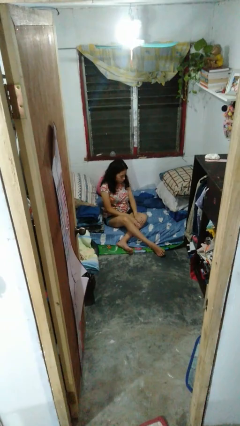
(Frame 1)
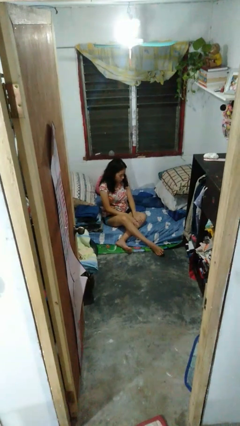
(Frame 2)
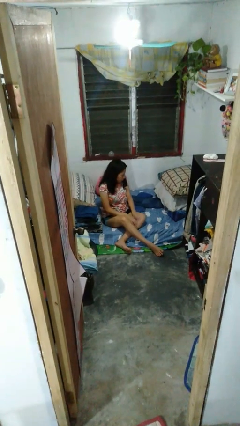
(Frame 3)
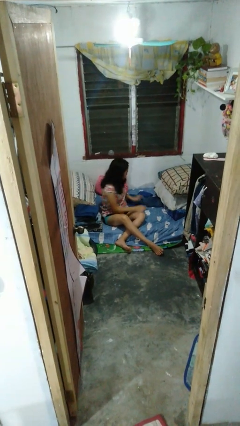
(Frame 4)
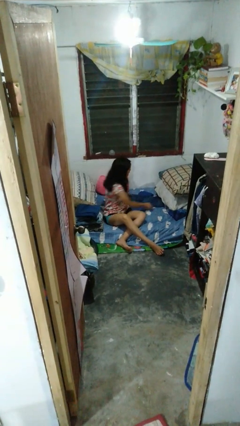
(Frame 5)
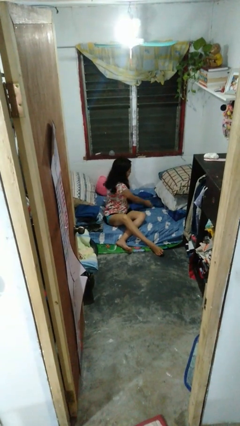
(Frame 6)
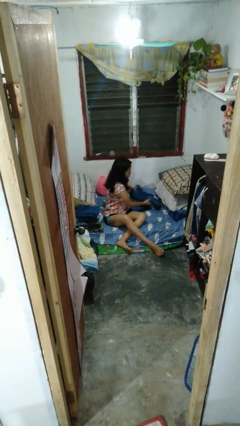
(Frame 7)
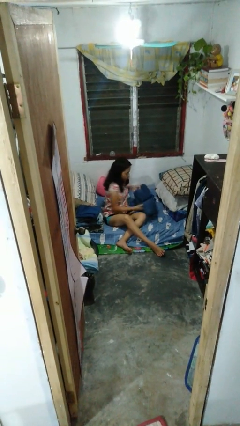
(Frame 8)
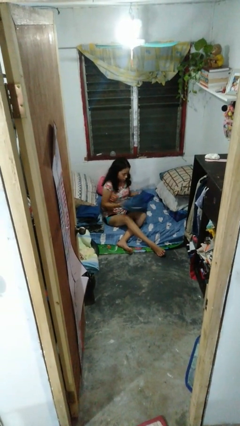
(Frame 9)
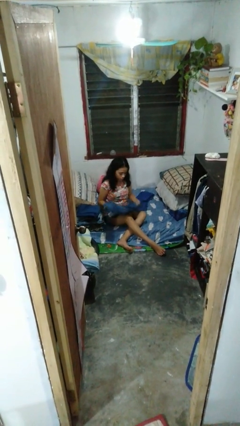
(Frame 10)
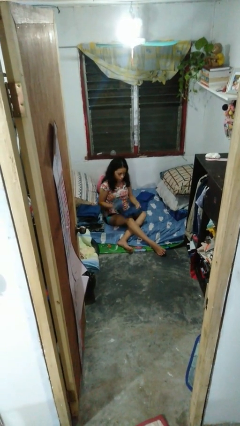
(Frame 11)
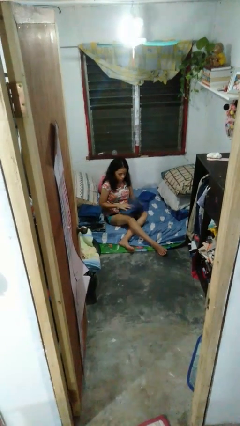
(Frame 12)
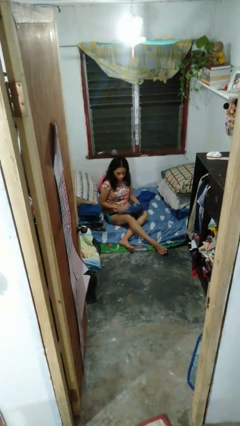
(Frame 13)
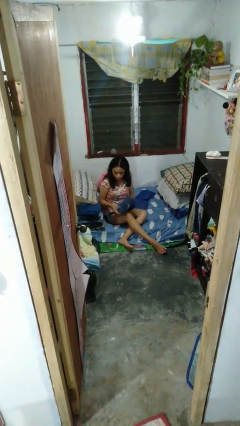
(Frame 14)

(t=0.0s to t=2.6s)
person folds pants

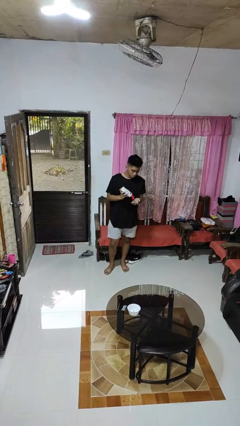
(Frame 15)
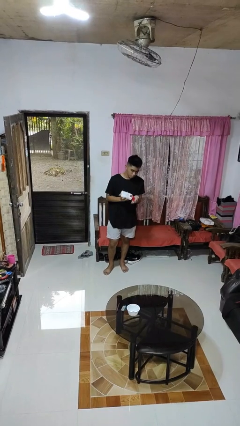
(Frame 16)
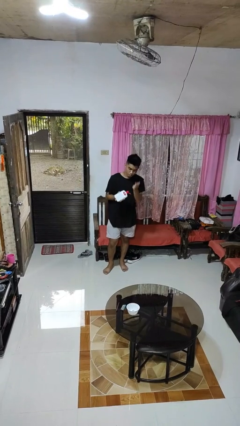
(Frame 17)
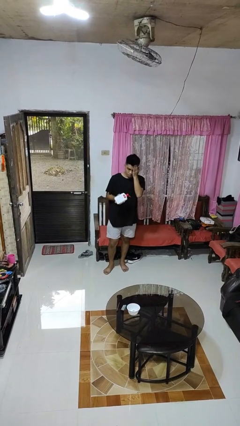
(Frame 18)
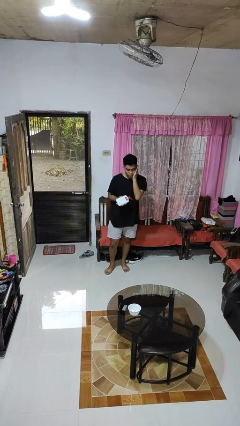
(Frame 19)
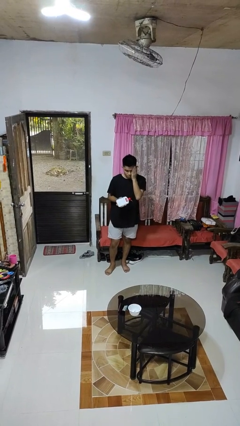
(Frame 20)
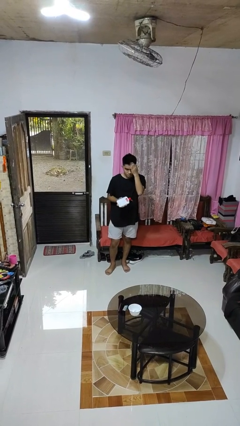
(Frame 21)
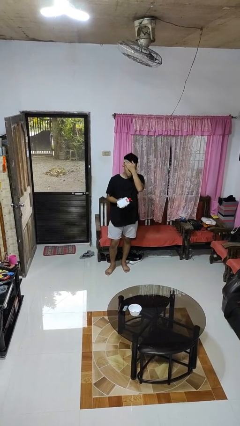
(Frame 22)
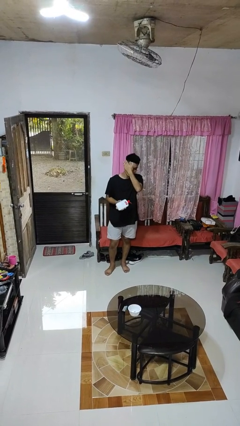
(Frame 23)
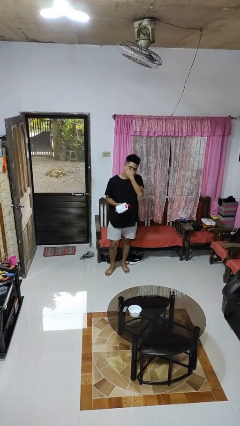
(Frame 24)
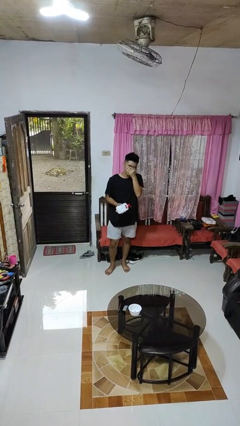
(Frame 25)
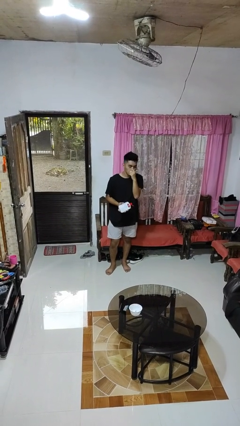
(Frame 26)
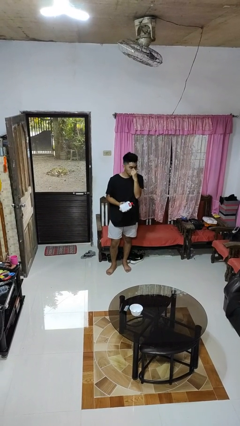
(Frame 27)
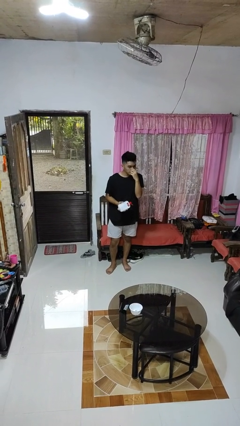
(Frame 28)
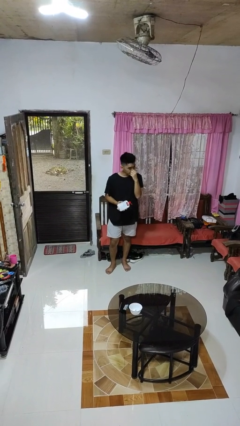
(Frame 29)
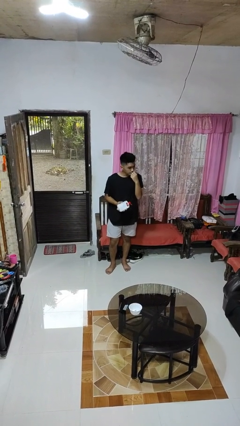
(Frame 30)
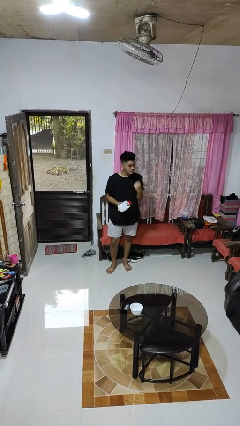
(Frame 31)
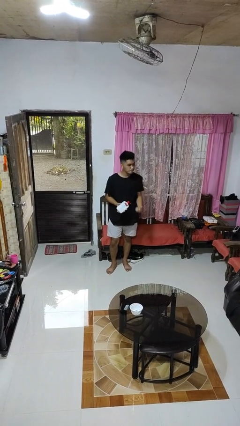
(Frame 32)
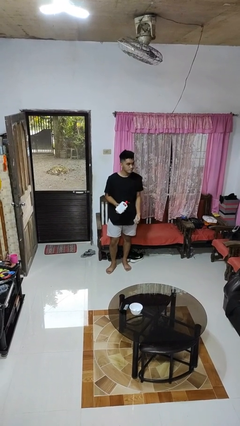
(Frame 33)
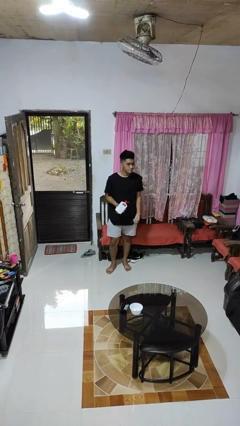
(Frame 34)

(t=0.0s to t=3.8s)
person applies facial moisturizer

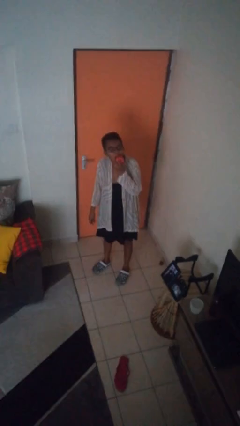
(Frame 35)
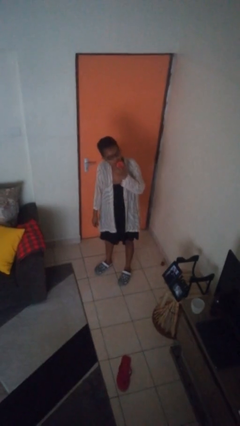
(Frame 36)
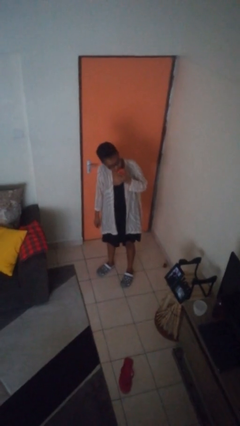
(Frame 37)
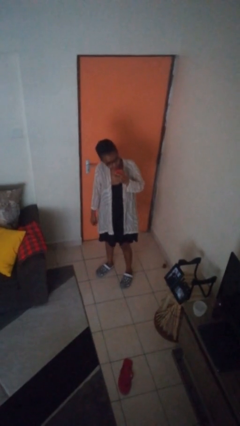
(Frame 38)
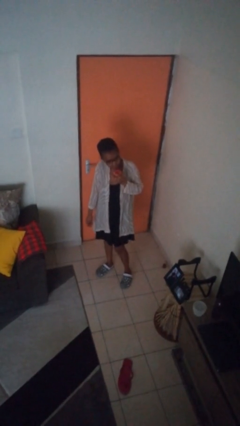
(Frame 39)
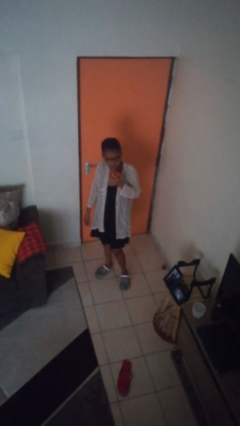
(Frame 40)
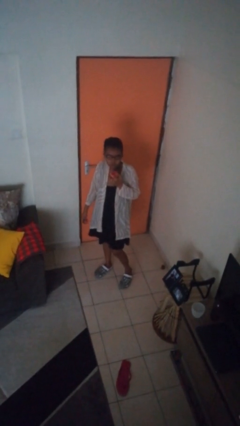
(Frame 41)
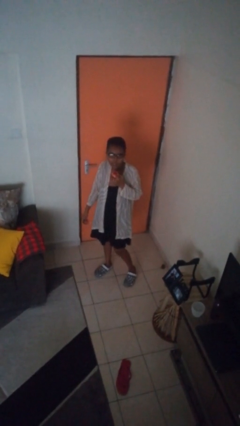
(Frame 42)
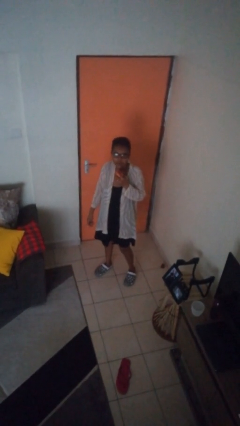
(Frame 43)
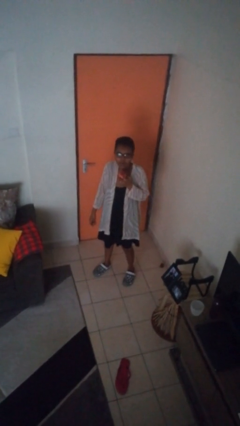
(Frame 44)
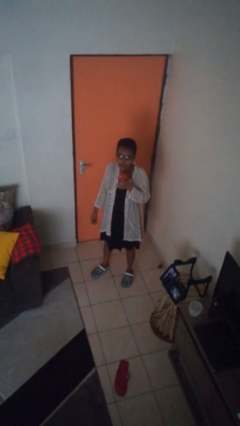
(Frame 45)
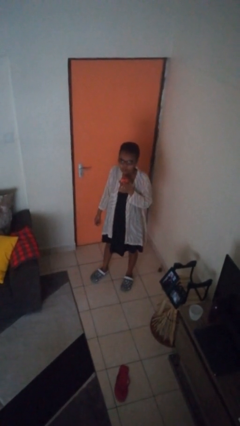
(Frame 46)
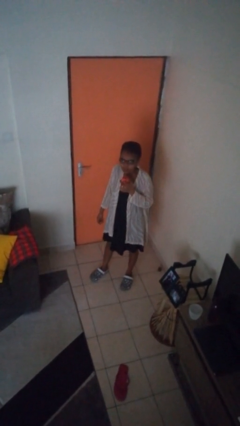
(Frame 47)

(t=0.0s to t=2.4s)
person eats apple

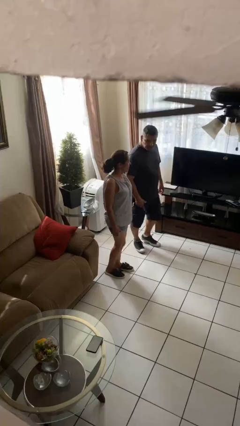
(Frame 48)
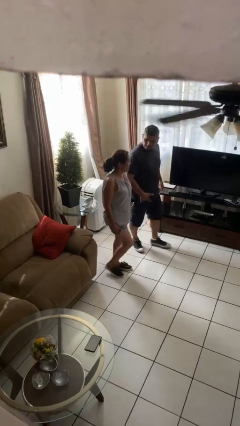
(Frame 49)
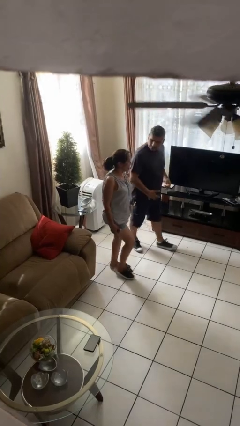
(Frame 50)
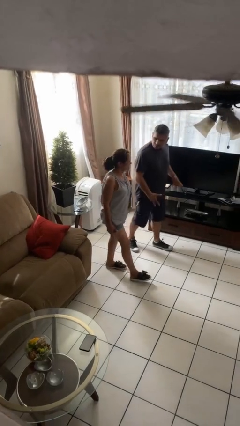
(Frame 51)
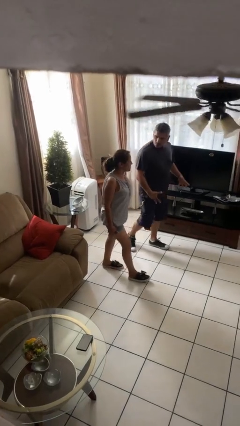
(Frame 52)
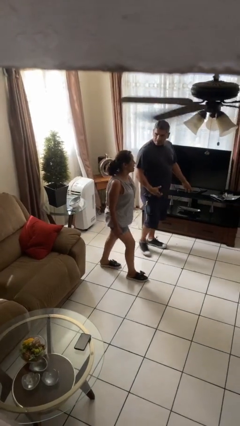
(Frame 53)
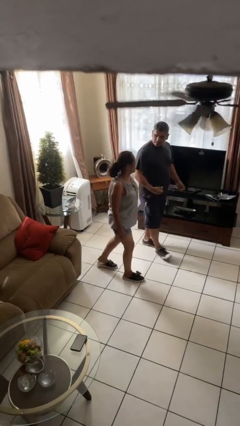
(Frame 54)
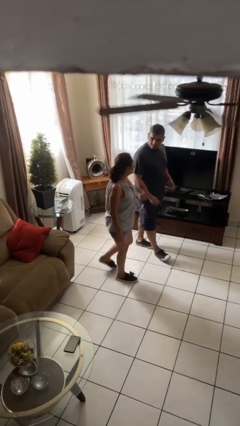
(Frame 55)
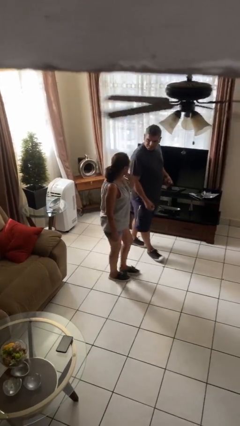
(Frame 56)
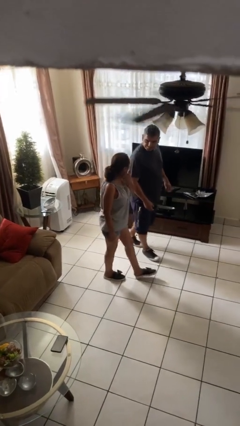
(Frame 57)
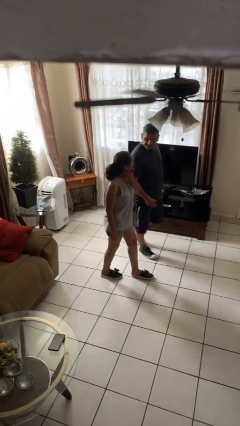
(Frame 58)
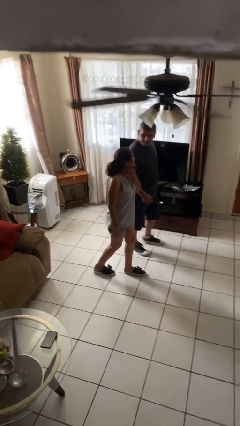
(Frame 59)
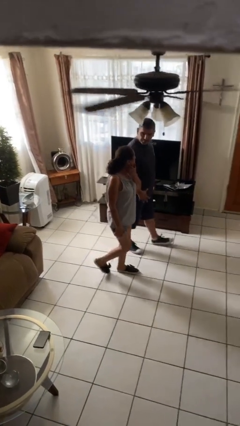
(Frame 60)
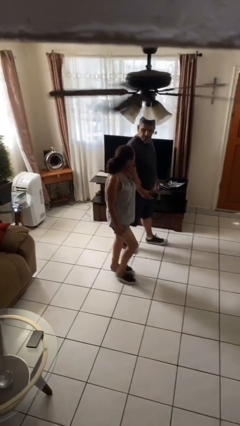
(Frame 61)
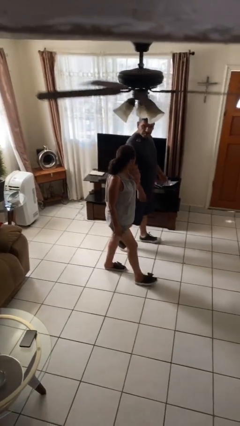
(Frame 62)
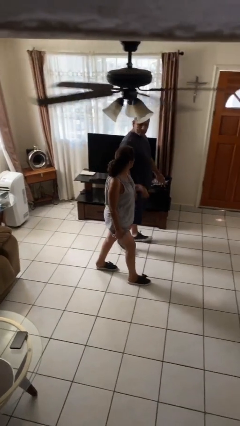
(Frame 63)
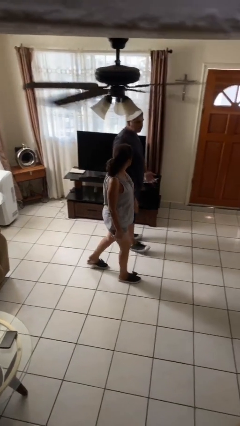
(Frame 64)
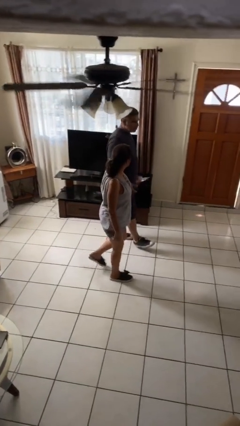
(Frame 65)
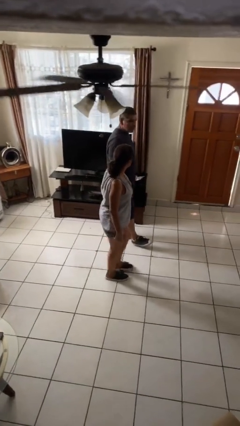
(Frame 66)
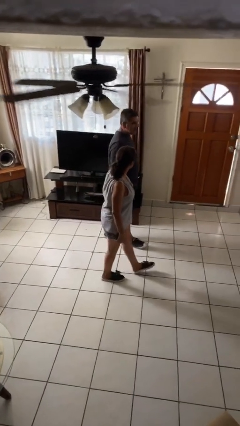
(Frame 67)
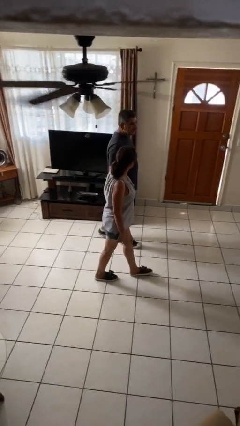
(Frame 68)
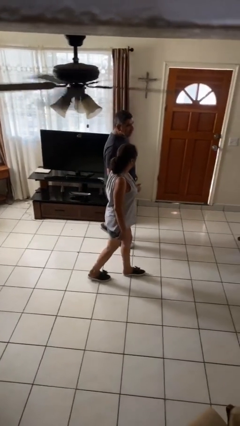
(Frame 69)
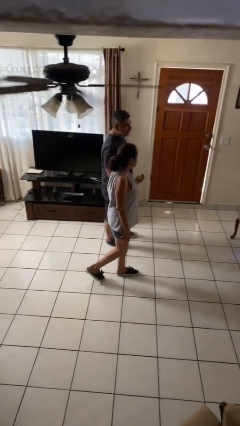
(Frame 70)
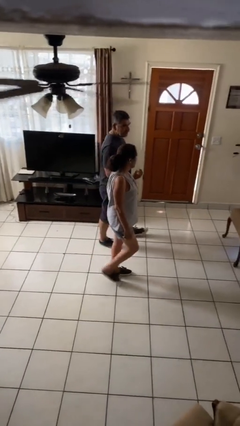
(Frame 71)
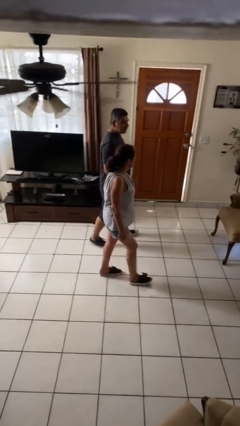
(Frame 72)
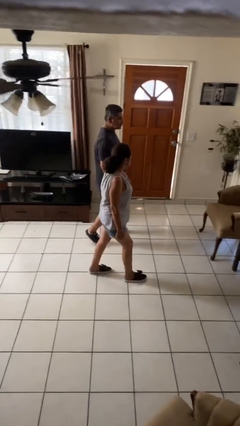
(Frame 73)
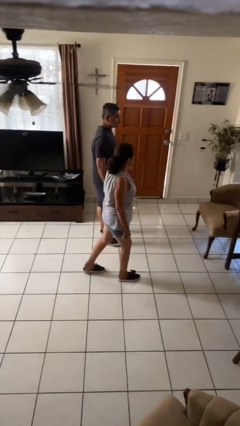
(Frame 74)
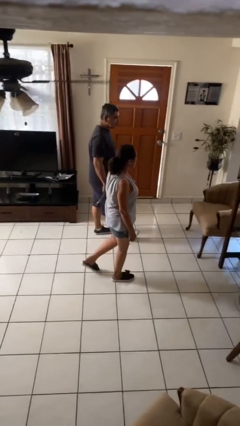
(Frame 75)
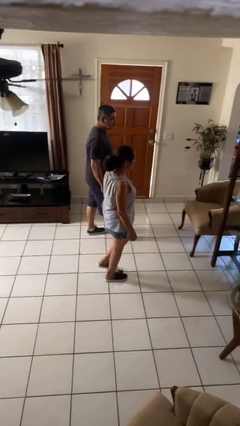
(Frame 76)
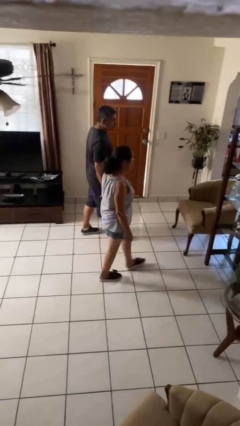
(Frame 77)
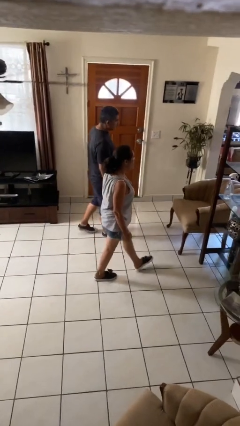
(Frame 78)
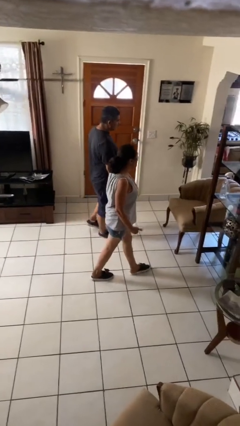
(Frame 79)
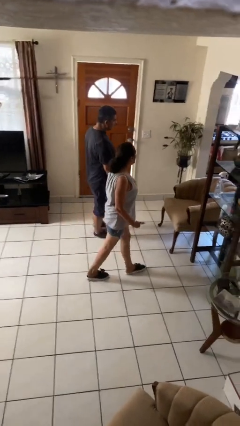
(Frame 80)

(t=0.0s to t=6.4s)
person talks to person

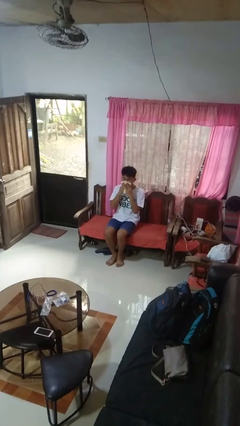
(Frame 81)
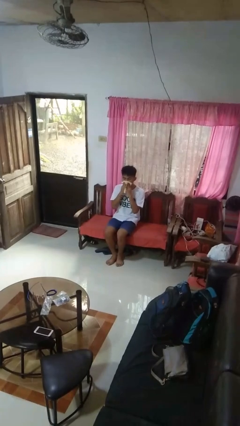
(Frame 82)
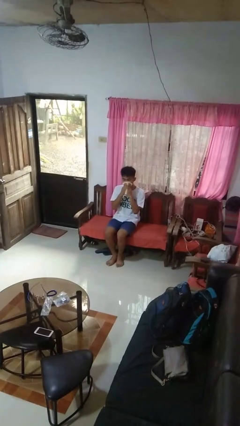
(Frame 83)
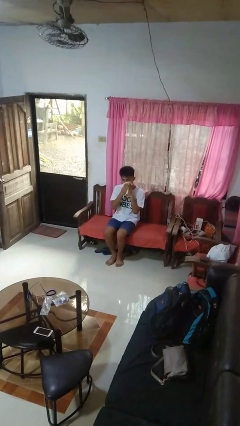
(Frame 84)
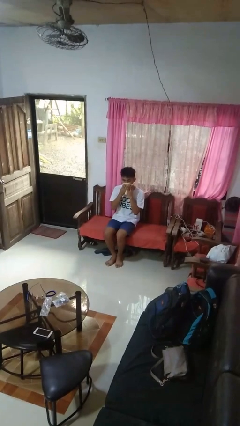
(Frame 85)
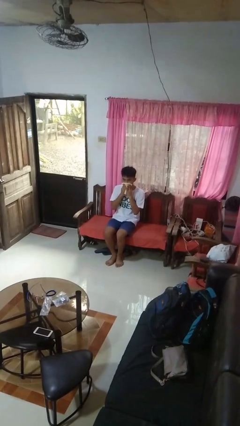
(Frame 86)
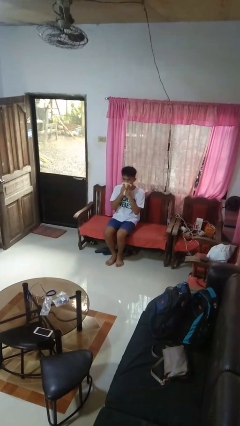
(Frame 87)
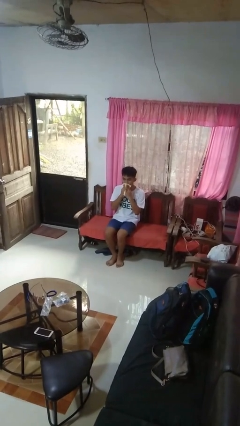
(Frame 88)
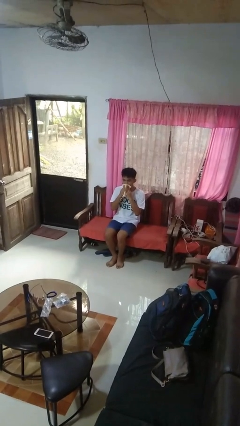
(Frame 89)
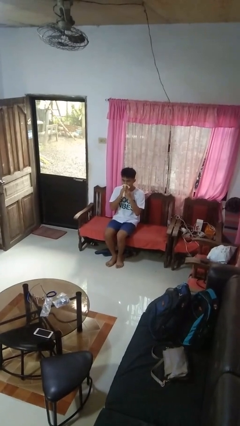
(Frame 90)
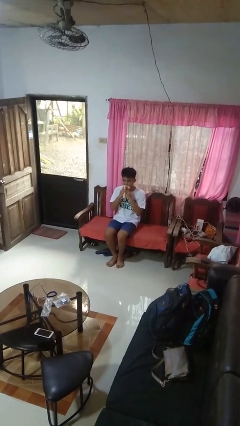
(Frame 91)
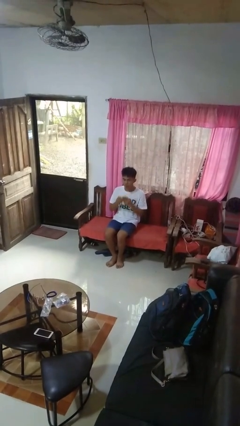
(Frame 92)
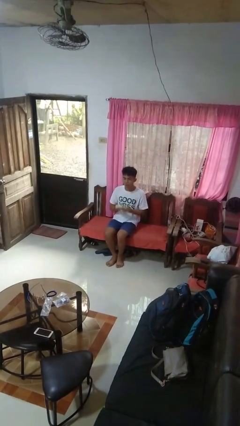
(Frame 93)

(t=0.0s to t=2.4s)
person wipes mouth with napkin

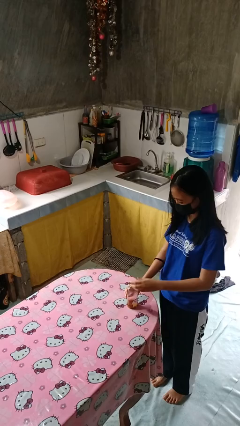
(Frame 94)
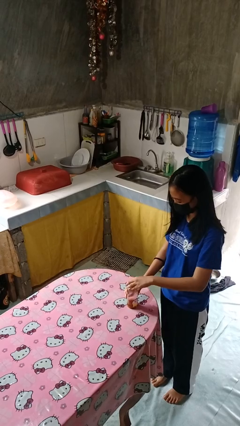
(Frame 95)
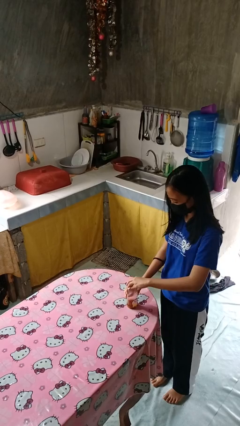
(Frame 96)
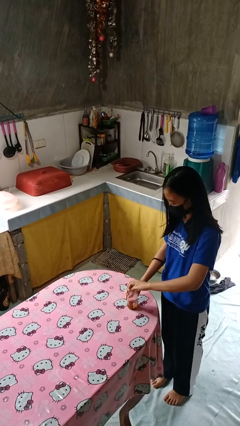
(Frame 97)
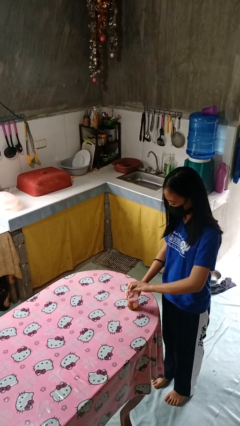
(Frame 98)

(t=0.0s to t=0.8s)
person opens jar
